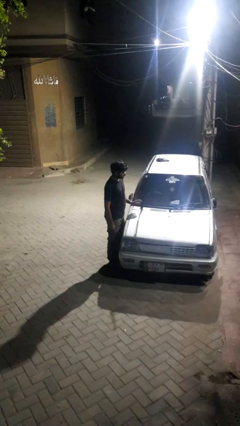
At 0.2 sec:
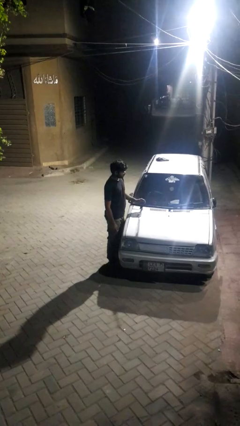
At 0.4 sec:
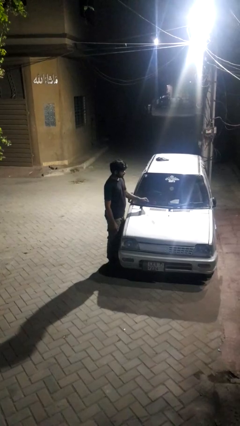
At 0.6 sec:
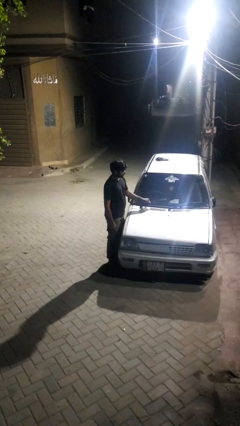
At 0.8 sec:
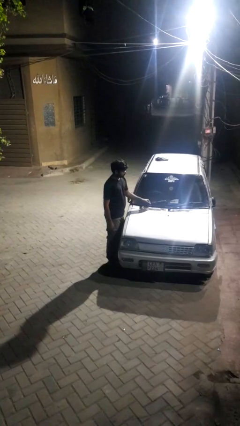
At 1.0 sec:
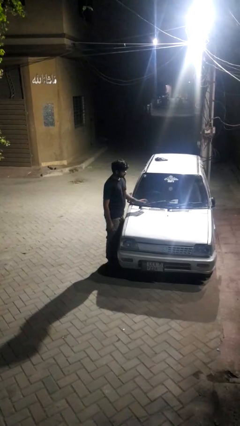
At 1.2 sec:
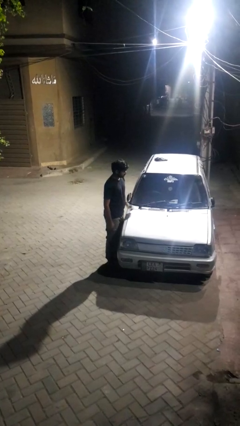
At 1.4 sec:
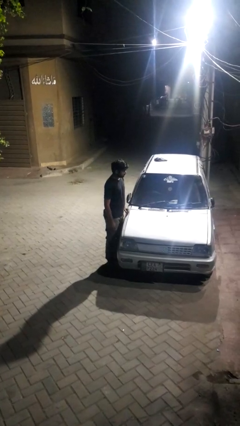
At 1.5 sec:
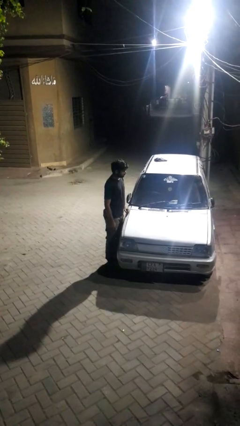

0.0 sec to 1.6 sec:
person flips down car wipers

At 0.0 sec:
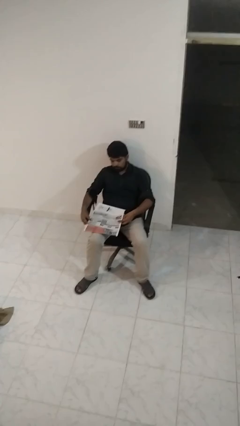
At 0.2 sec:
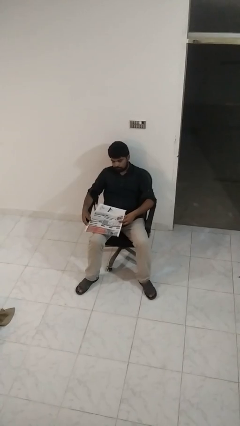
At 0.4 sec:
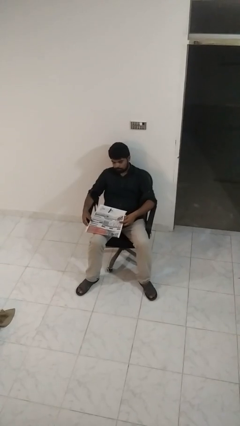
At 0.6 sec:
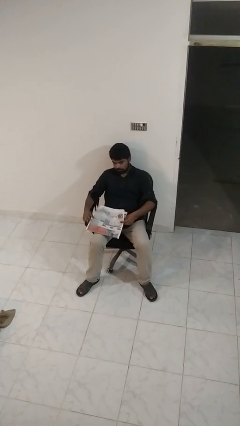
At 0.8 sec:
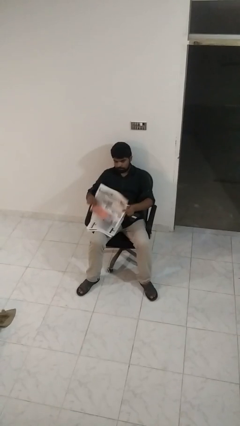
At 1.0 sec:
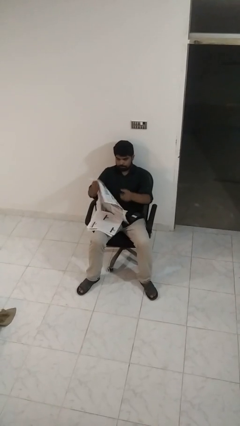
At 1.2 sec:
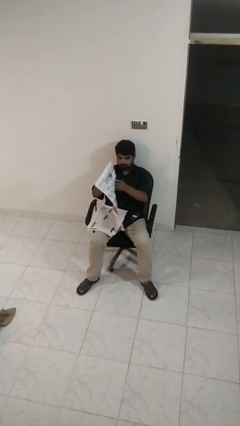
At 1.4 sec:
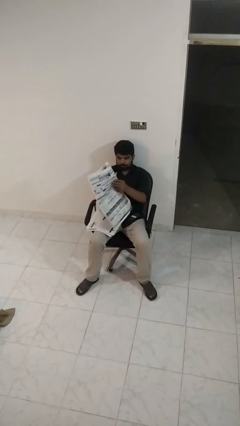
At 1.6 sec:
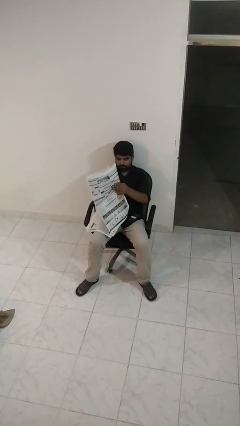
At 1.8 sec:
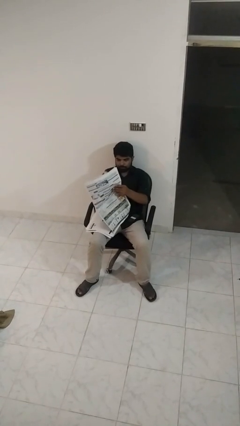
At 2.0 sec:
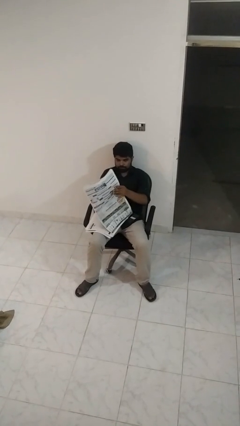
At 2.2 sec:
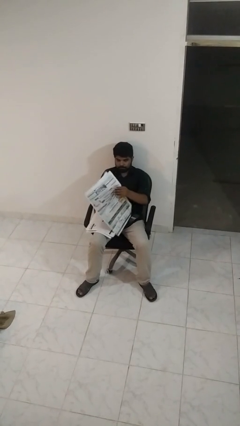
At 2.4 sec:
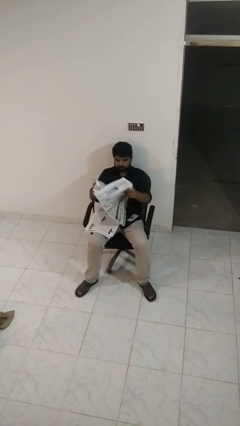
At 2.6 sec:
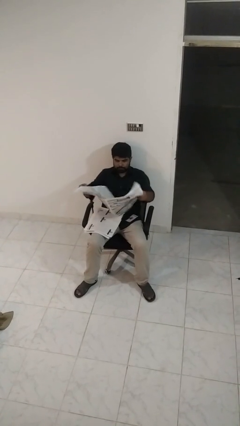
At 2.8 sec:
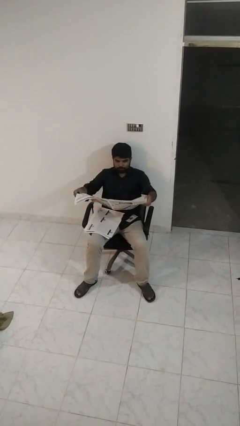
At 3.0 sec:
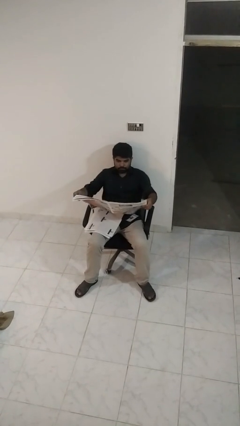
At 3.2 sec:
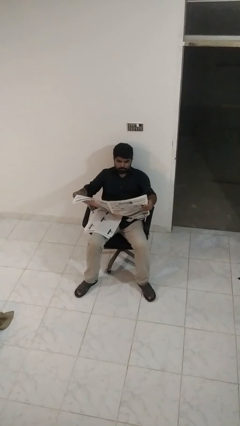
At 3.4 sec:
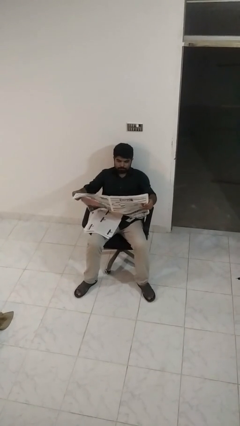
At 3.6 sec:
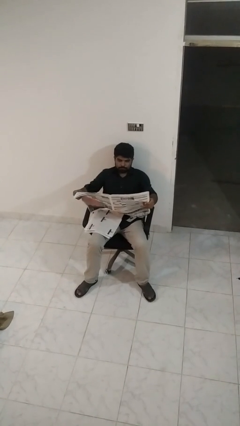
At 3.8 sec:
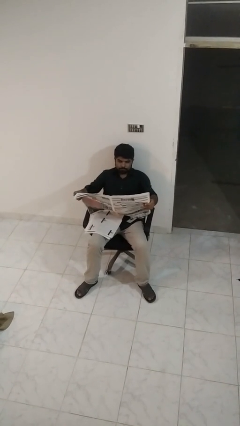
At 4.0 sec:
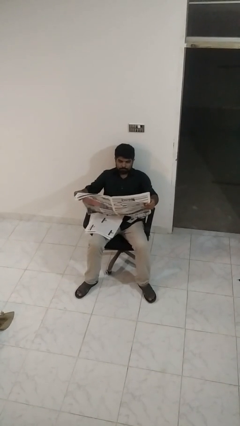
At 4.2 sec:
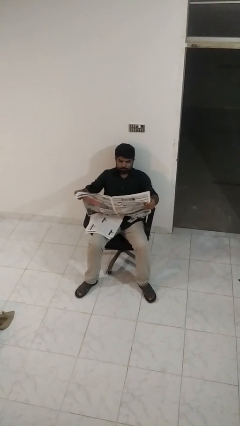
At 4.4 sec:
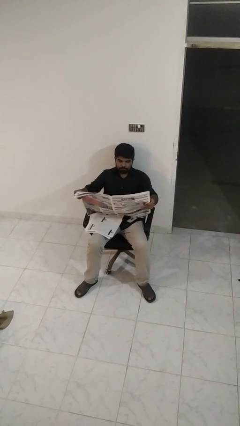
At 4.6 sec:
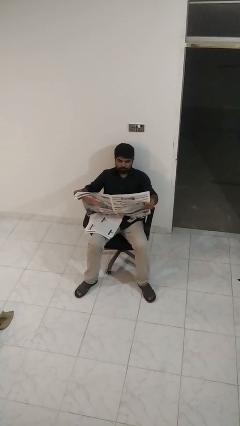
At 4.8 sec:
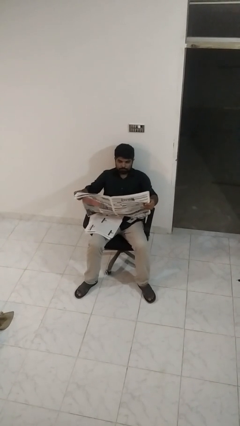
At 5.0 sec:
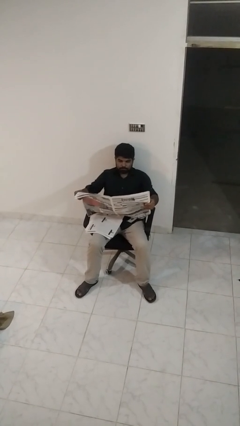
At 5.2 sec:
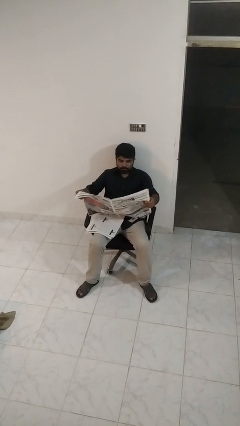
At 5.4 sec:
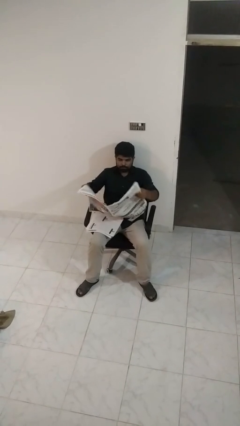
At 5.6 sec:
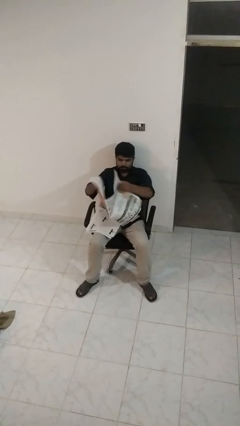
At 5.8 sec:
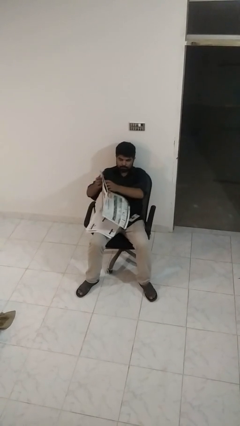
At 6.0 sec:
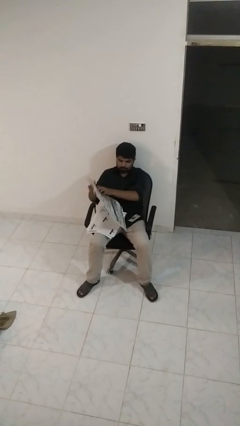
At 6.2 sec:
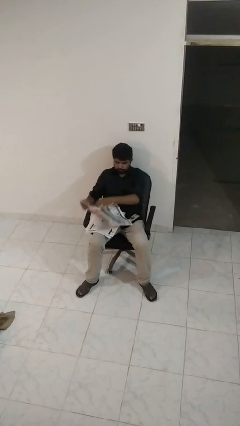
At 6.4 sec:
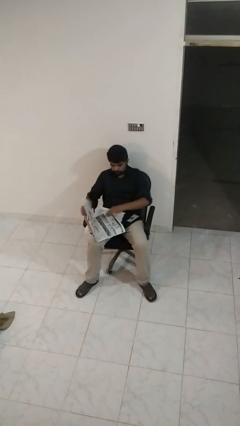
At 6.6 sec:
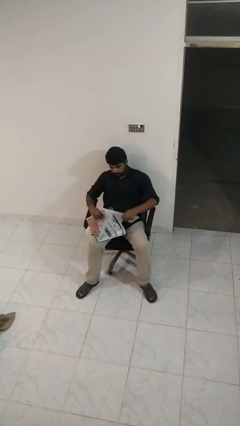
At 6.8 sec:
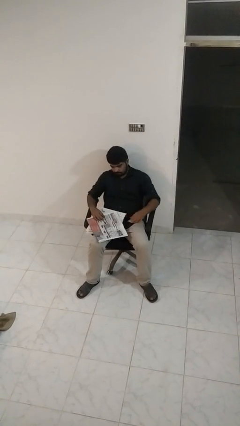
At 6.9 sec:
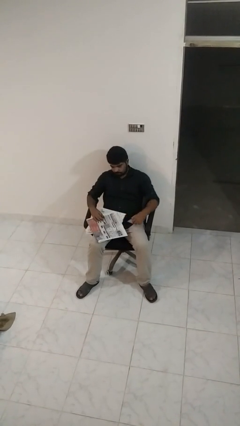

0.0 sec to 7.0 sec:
person reads newspaper

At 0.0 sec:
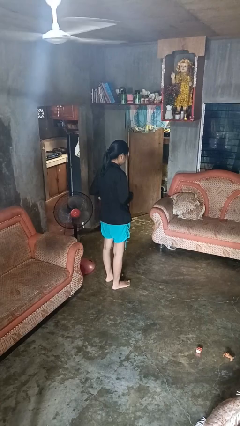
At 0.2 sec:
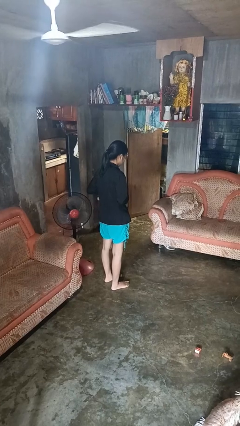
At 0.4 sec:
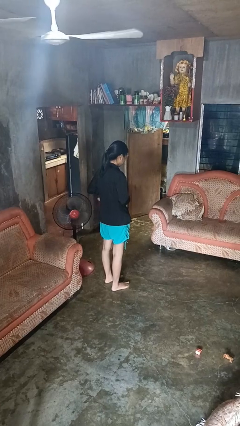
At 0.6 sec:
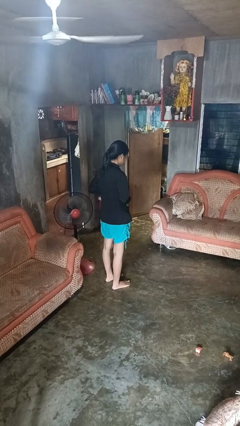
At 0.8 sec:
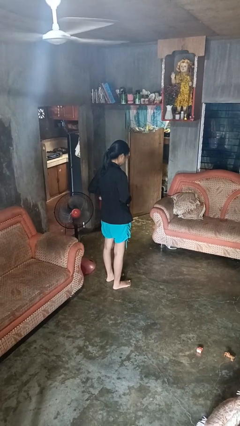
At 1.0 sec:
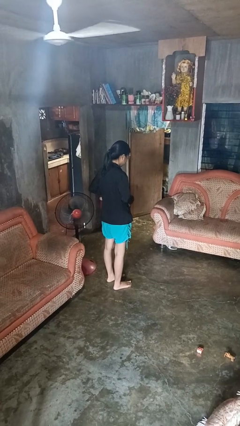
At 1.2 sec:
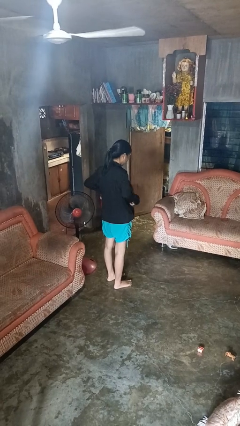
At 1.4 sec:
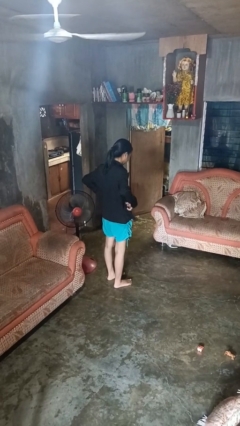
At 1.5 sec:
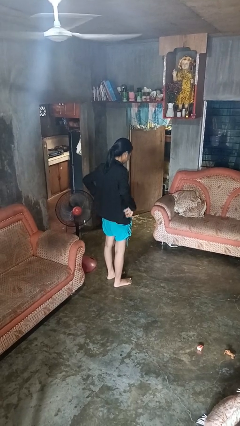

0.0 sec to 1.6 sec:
person unbuttons shirt

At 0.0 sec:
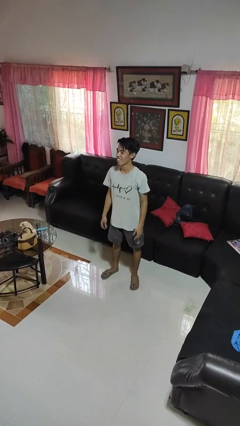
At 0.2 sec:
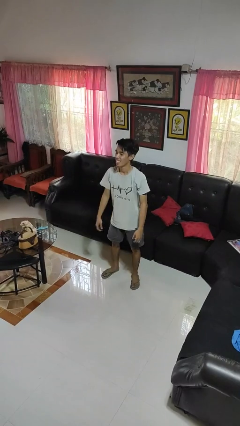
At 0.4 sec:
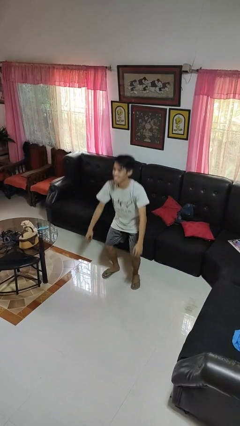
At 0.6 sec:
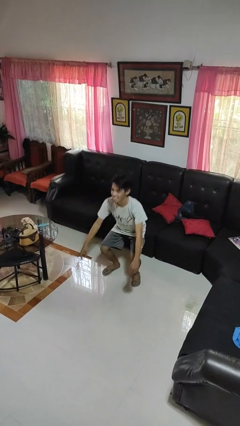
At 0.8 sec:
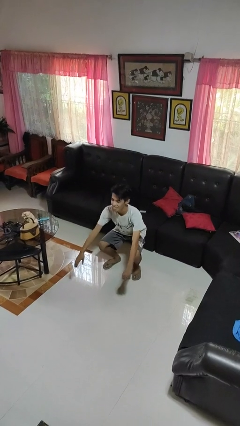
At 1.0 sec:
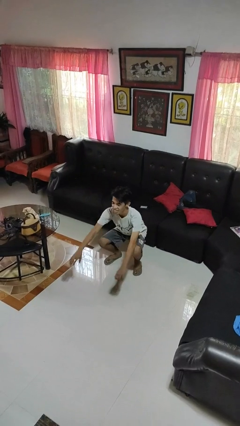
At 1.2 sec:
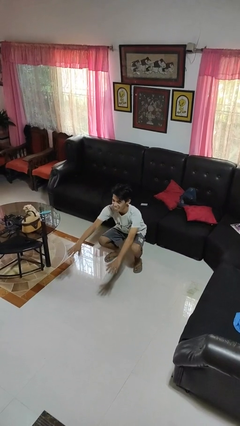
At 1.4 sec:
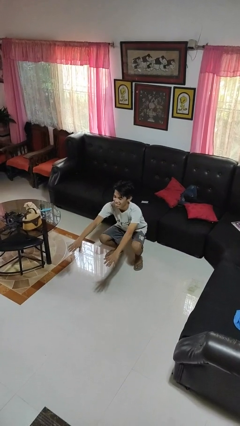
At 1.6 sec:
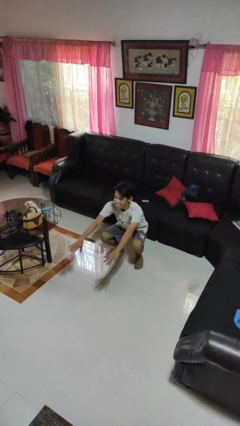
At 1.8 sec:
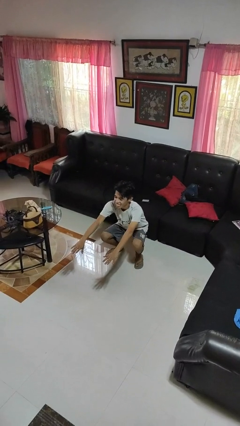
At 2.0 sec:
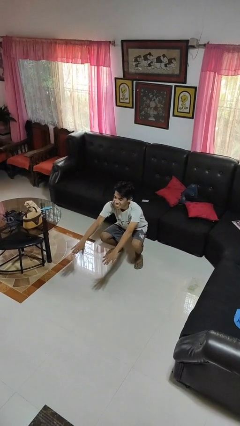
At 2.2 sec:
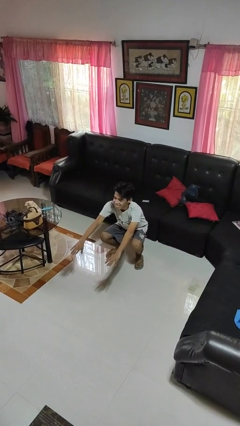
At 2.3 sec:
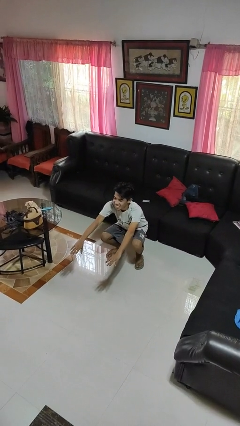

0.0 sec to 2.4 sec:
person squats

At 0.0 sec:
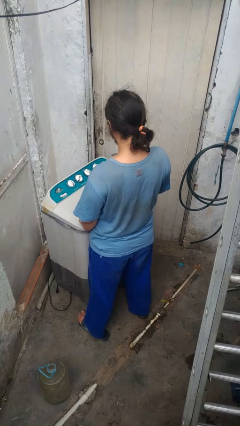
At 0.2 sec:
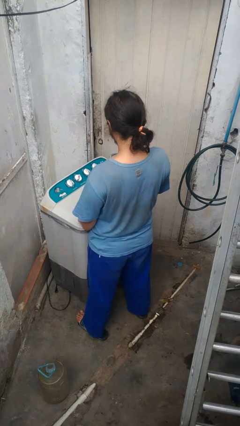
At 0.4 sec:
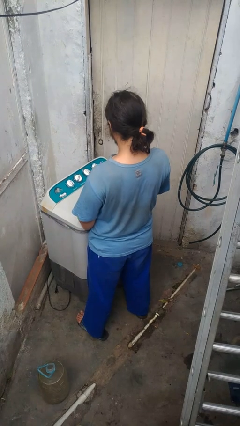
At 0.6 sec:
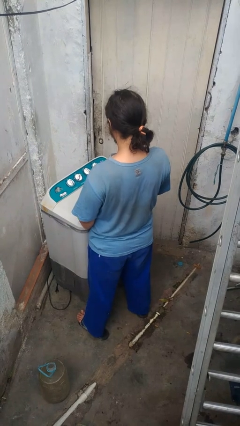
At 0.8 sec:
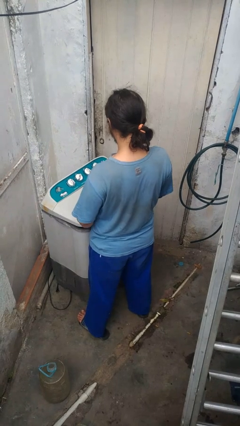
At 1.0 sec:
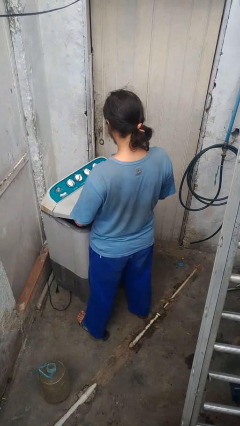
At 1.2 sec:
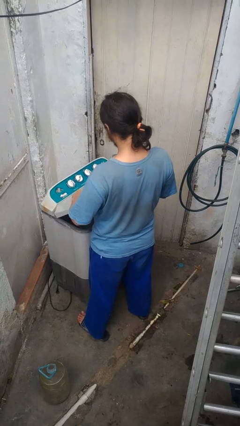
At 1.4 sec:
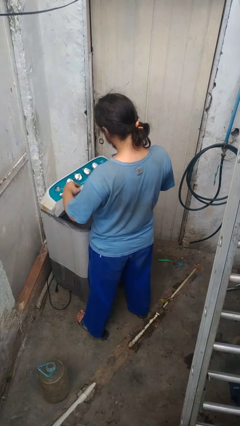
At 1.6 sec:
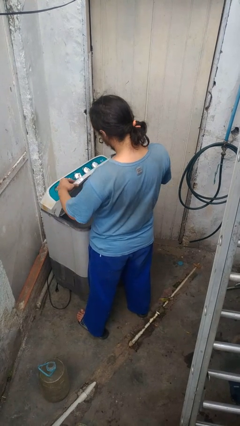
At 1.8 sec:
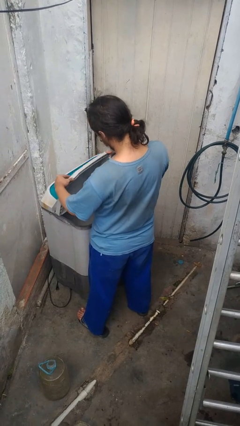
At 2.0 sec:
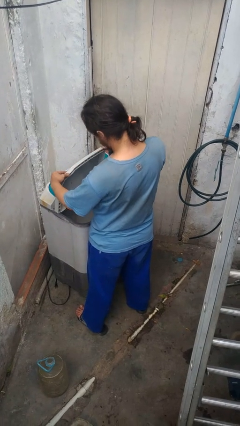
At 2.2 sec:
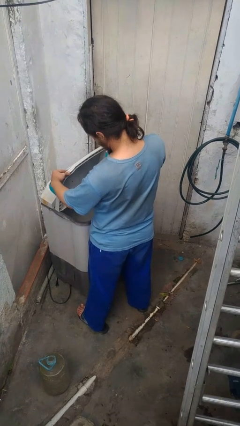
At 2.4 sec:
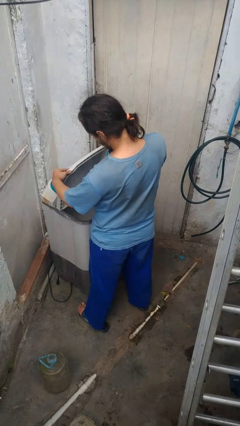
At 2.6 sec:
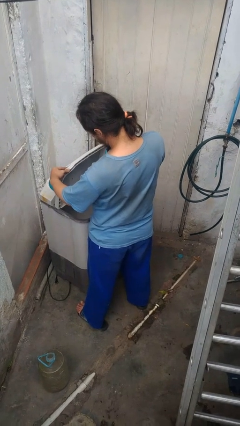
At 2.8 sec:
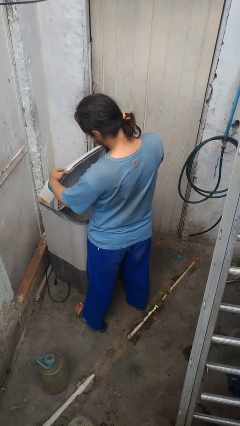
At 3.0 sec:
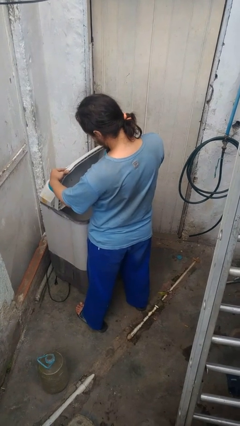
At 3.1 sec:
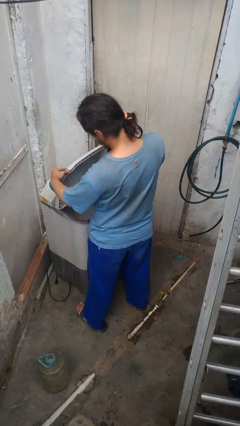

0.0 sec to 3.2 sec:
person opens clothes washer

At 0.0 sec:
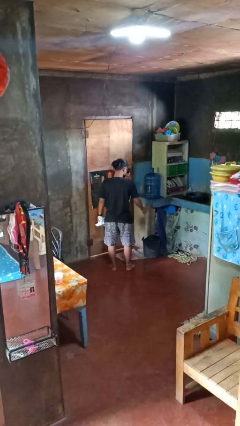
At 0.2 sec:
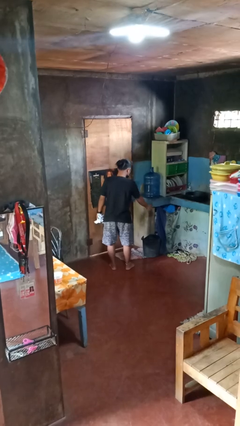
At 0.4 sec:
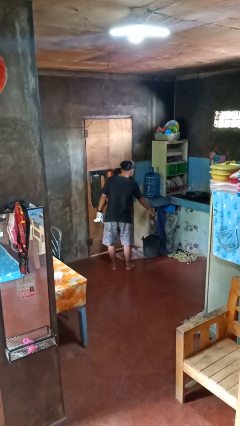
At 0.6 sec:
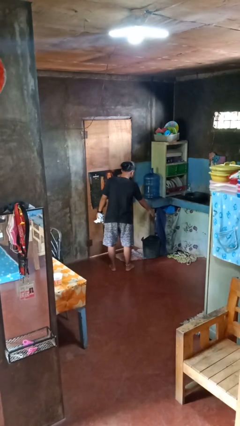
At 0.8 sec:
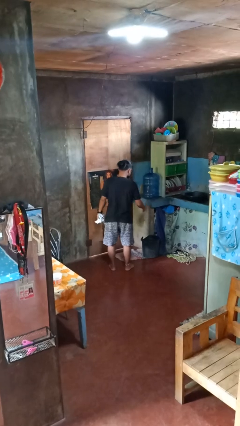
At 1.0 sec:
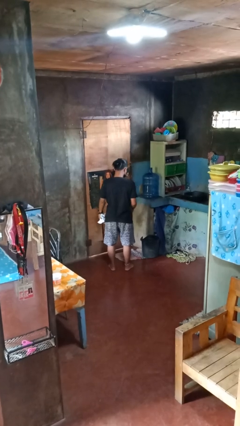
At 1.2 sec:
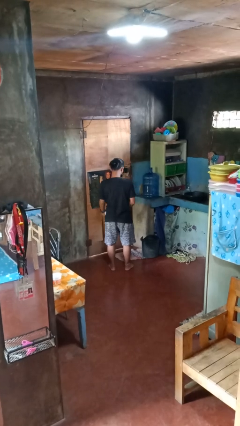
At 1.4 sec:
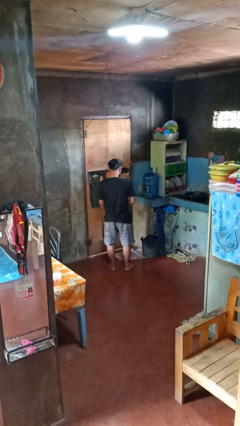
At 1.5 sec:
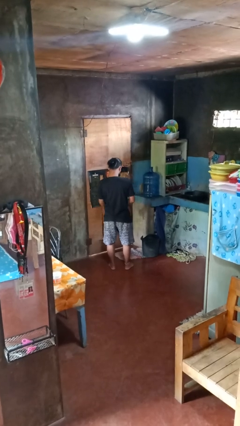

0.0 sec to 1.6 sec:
person discards trash
